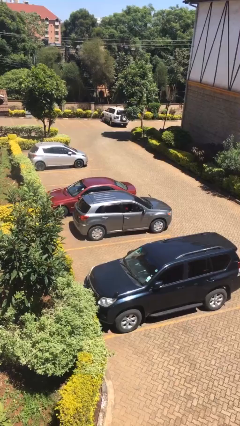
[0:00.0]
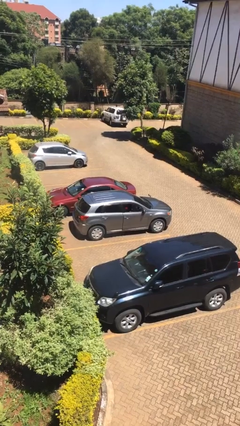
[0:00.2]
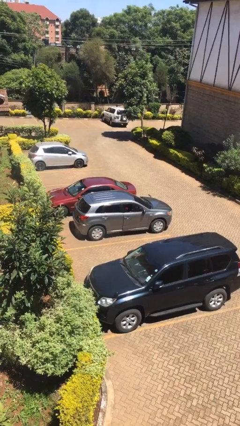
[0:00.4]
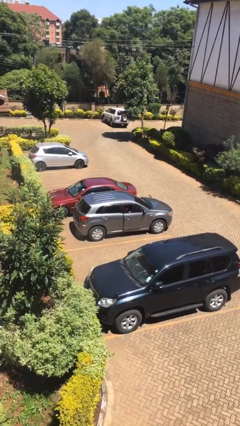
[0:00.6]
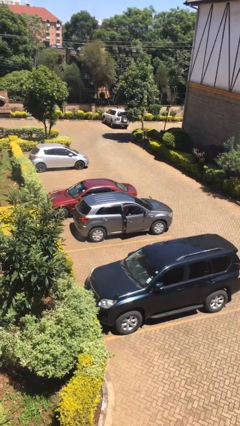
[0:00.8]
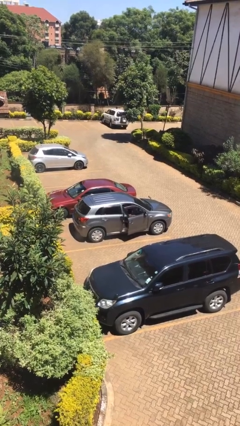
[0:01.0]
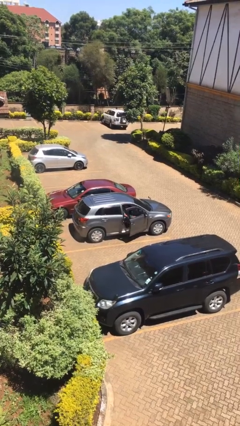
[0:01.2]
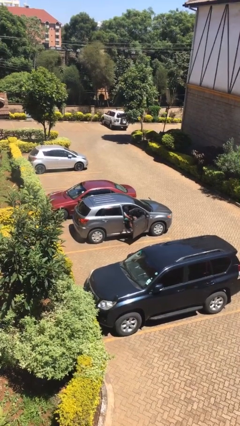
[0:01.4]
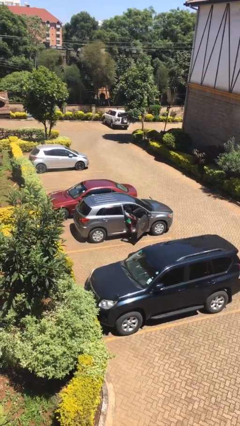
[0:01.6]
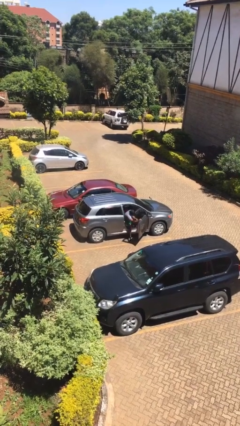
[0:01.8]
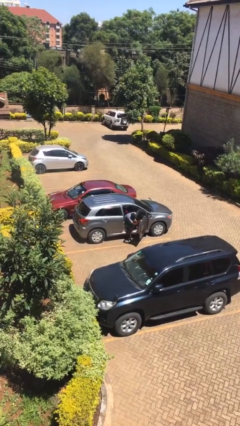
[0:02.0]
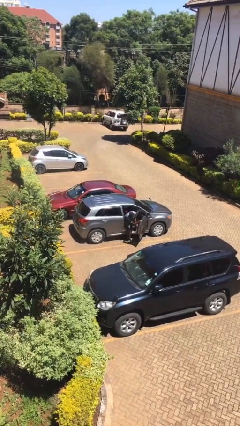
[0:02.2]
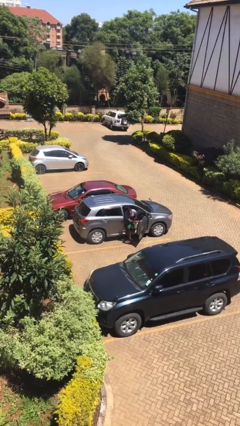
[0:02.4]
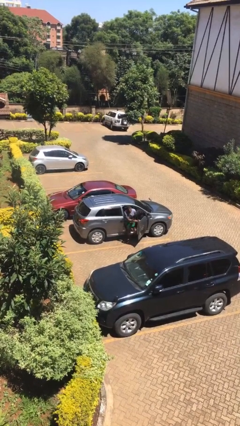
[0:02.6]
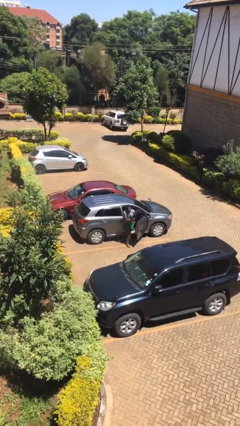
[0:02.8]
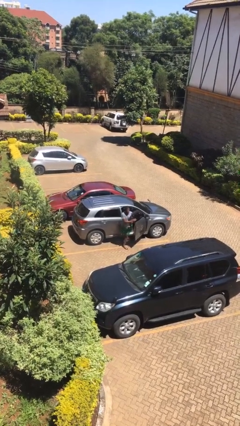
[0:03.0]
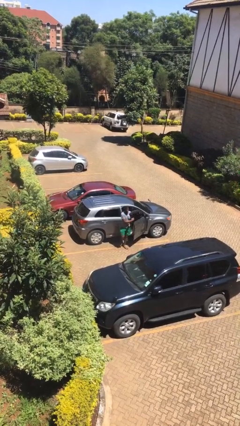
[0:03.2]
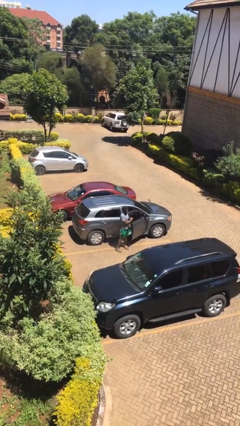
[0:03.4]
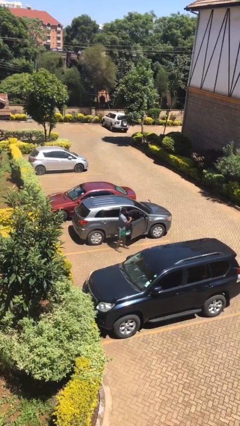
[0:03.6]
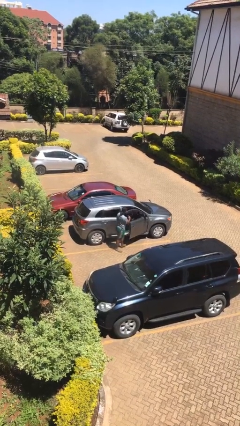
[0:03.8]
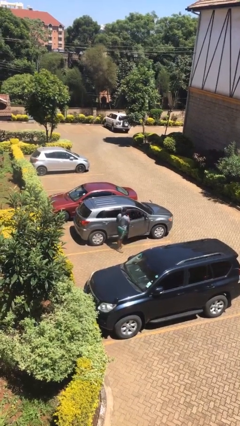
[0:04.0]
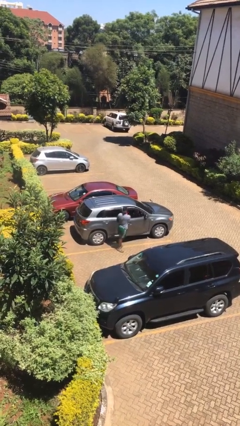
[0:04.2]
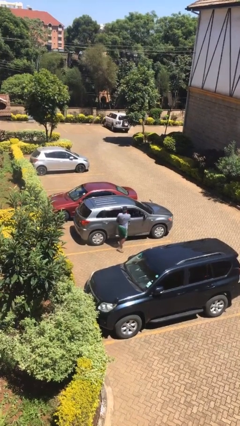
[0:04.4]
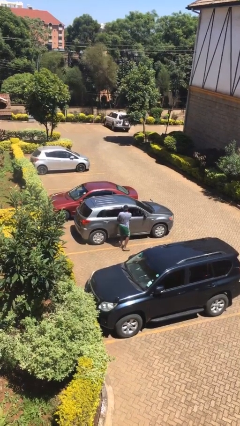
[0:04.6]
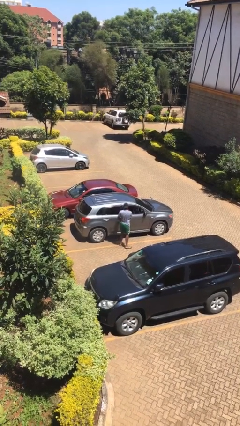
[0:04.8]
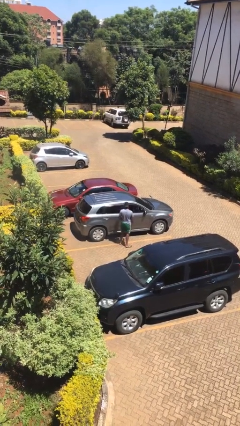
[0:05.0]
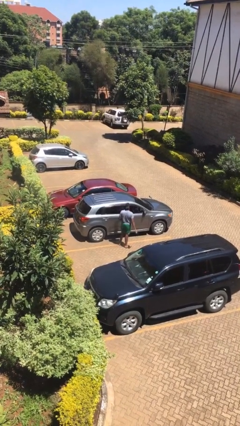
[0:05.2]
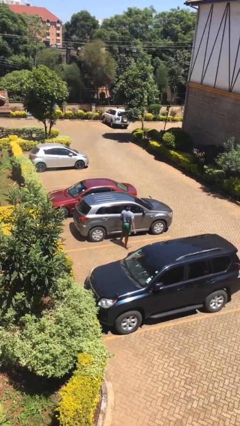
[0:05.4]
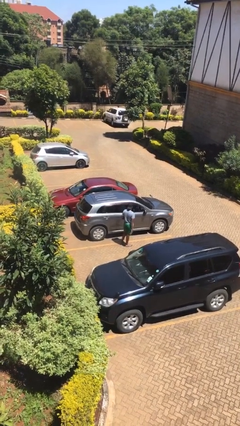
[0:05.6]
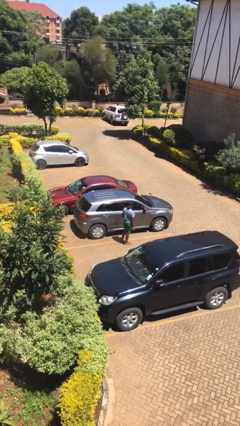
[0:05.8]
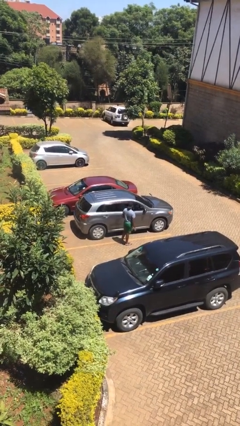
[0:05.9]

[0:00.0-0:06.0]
car drops off person

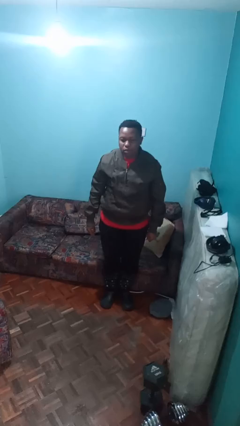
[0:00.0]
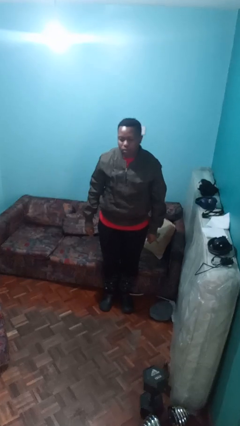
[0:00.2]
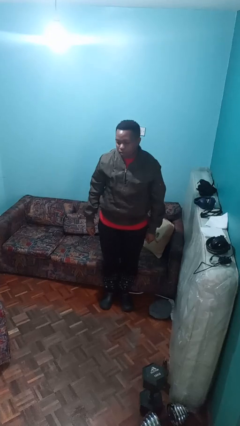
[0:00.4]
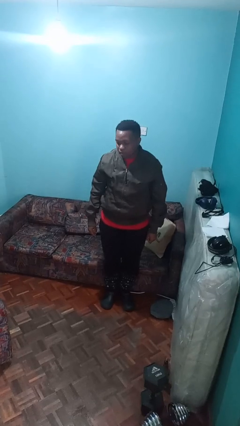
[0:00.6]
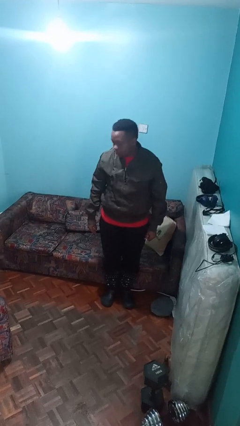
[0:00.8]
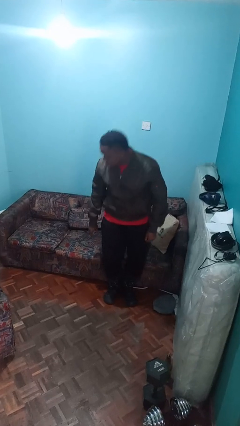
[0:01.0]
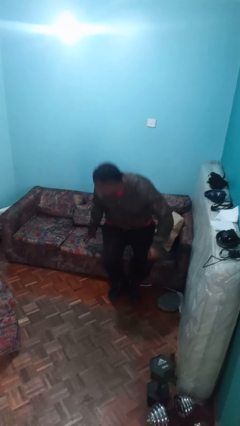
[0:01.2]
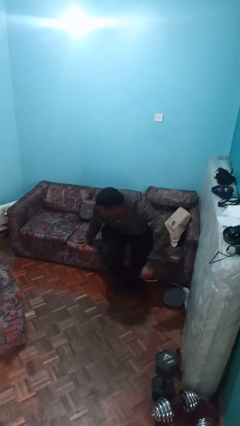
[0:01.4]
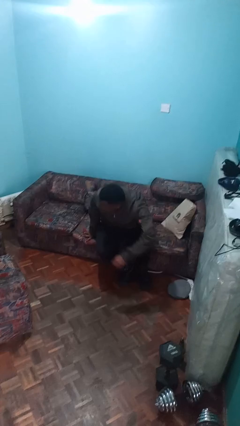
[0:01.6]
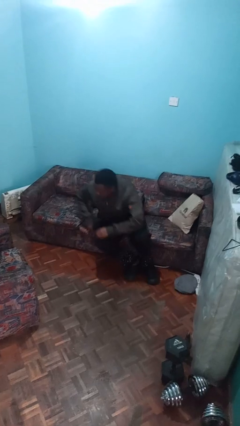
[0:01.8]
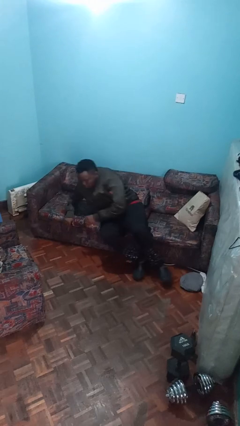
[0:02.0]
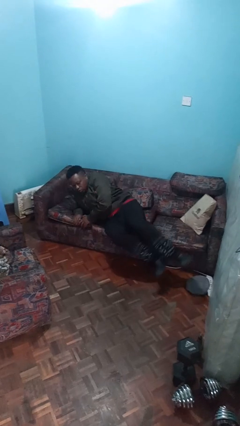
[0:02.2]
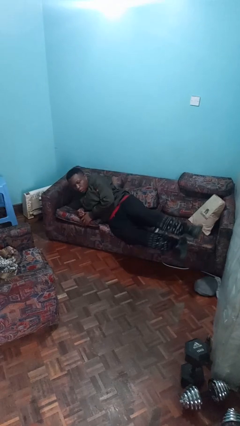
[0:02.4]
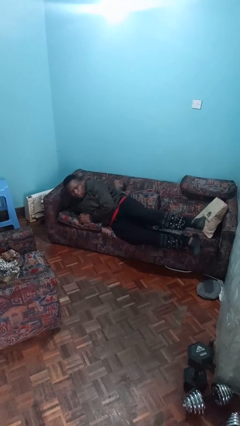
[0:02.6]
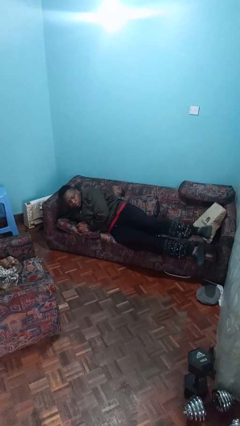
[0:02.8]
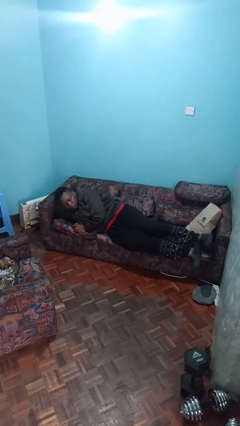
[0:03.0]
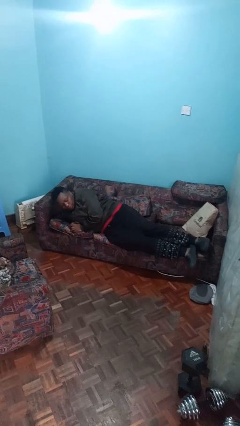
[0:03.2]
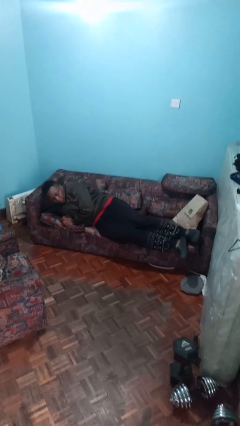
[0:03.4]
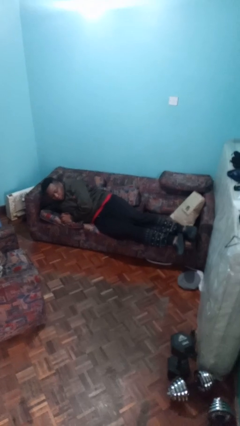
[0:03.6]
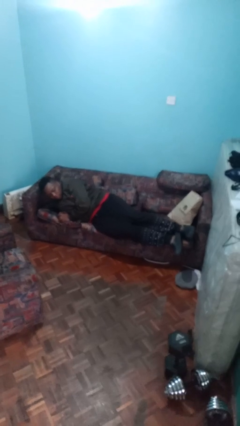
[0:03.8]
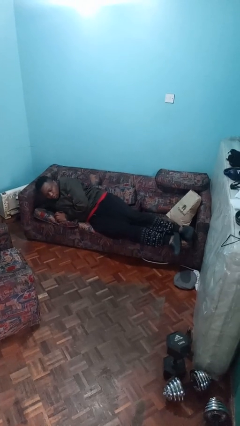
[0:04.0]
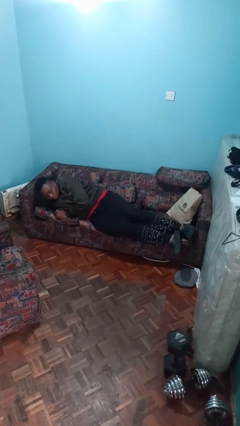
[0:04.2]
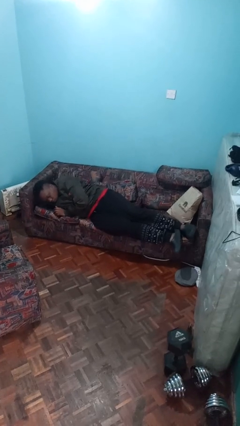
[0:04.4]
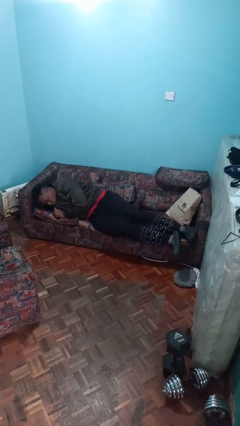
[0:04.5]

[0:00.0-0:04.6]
person lies down on couch

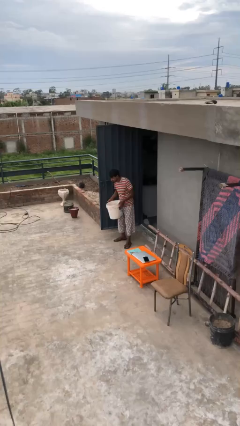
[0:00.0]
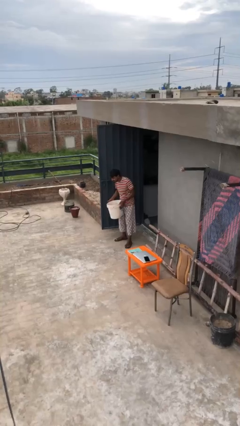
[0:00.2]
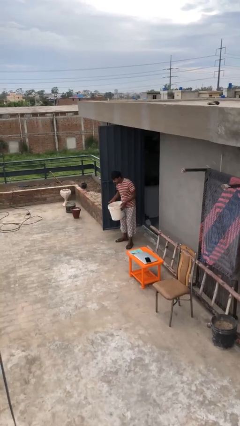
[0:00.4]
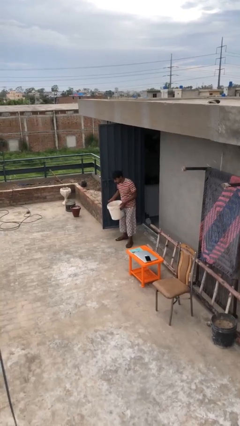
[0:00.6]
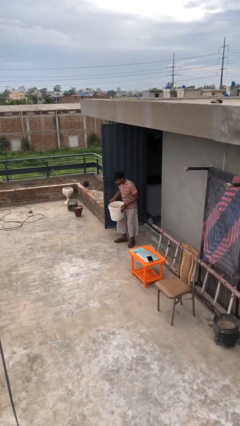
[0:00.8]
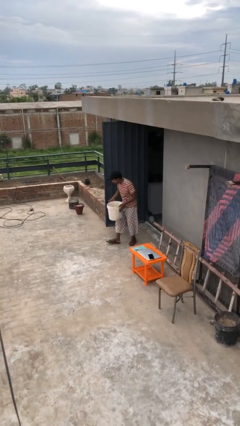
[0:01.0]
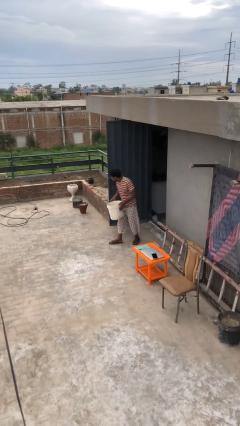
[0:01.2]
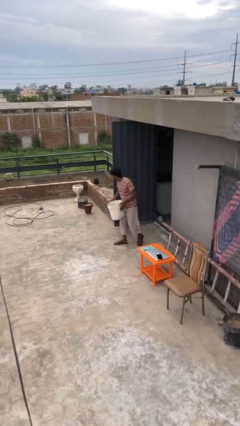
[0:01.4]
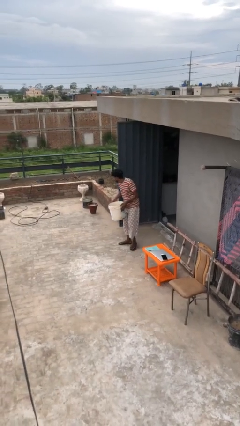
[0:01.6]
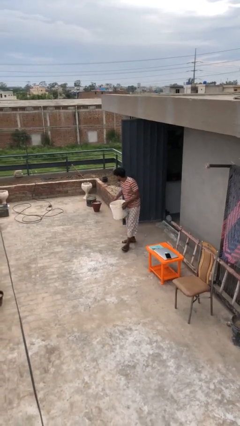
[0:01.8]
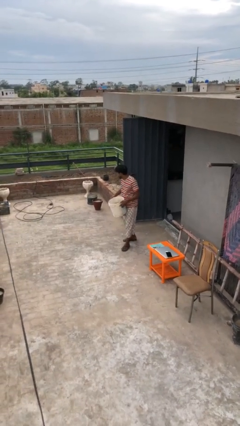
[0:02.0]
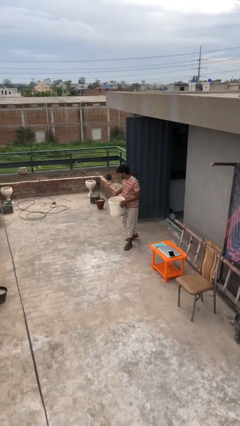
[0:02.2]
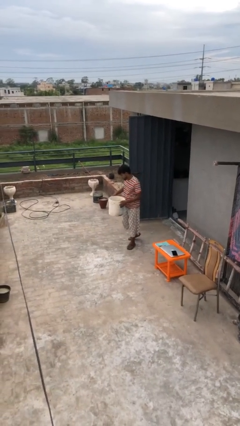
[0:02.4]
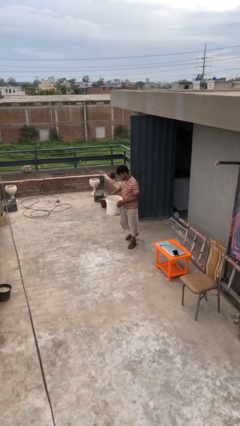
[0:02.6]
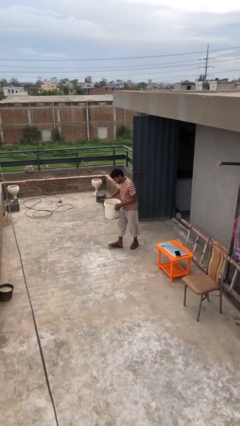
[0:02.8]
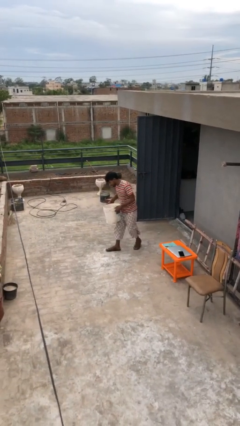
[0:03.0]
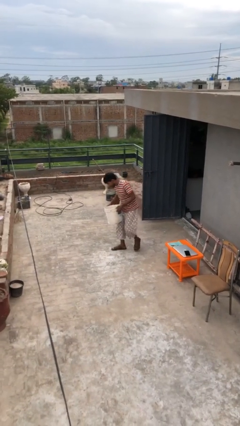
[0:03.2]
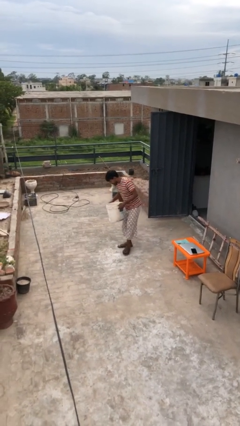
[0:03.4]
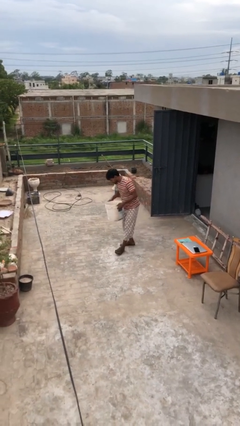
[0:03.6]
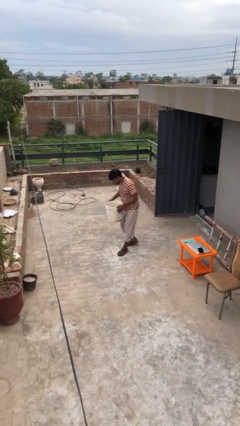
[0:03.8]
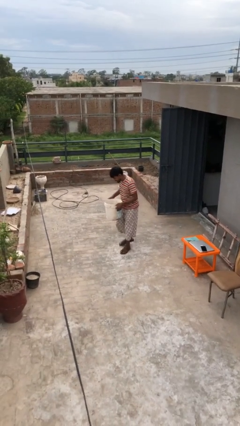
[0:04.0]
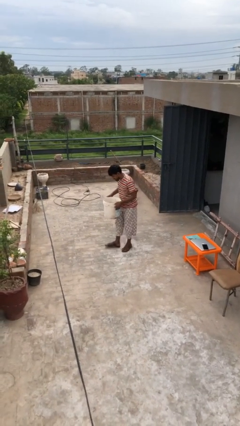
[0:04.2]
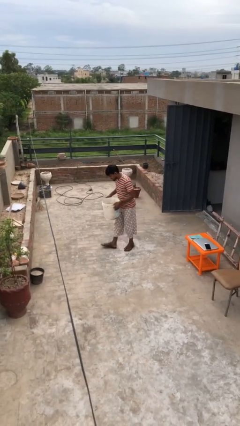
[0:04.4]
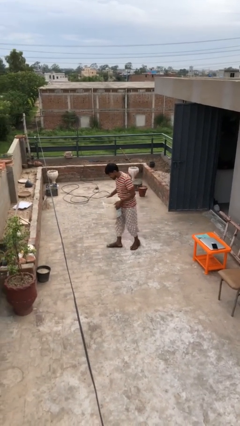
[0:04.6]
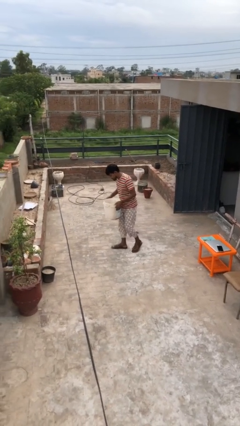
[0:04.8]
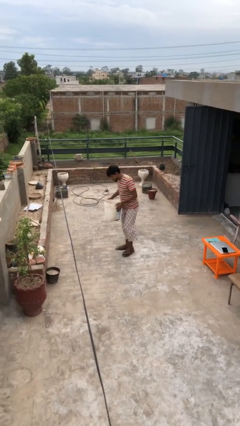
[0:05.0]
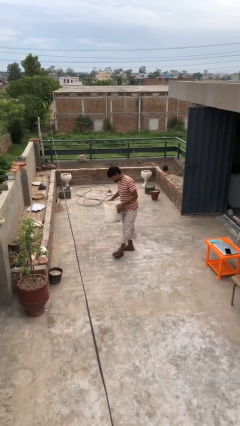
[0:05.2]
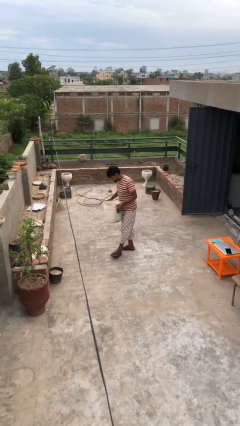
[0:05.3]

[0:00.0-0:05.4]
person carries heavy object

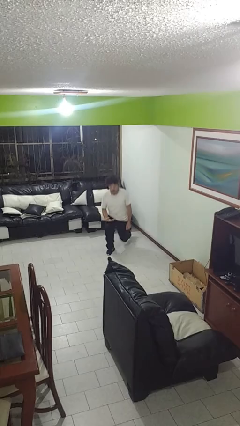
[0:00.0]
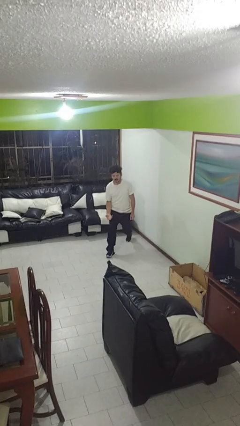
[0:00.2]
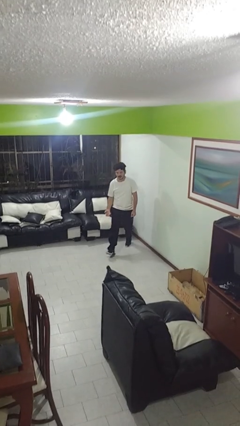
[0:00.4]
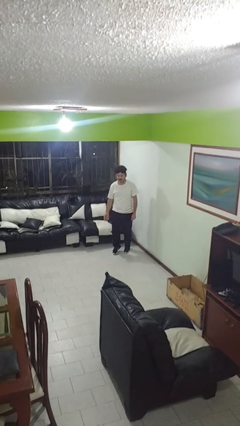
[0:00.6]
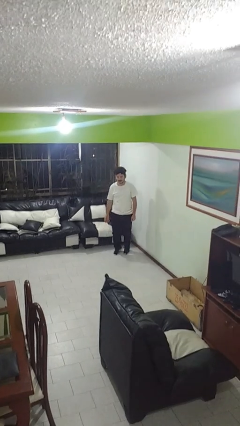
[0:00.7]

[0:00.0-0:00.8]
person stands up from floor

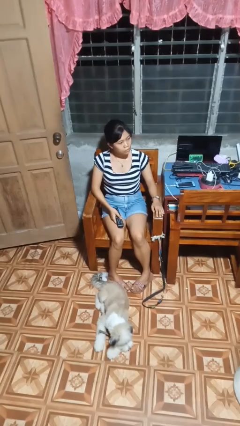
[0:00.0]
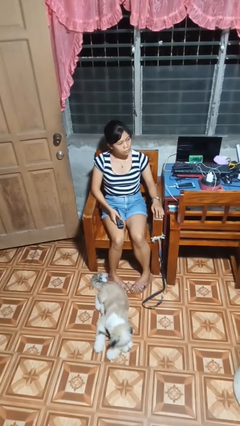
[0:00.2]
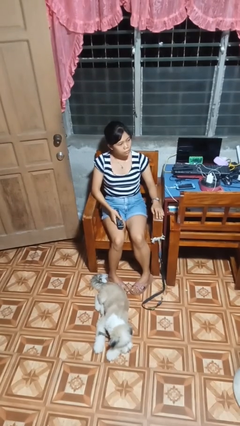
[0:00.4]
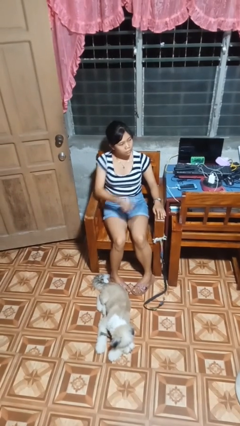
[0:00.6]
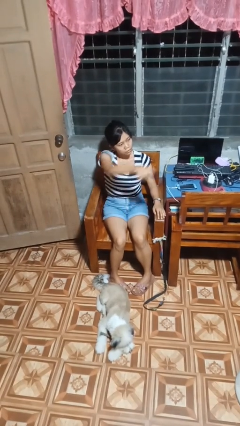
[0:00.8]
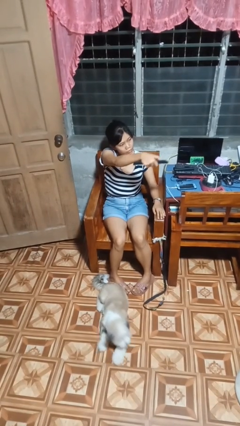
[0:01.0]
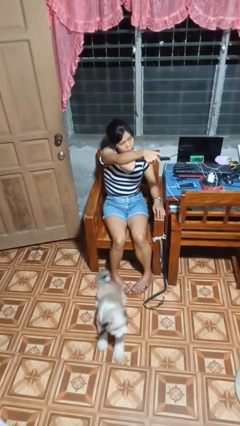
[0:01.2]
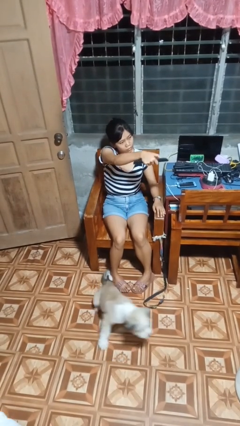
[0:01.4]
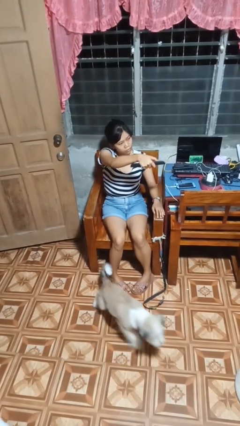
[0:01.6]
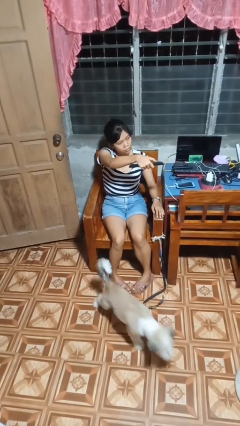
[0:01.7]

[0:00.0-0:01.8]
person uses television remote
